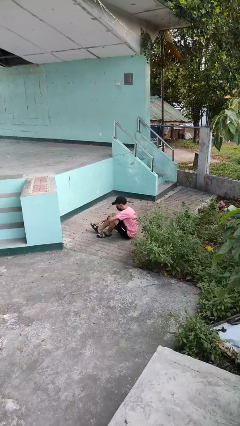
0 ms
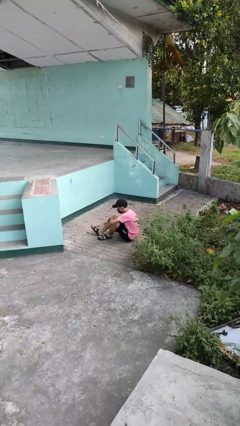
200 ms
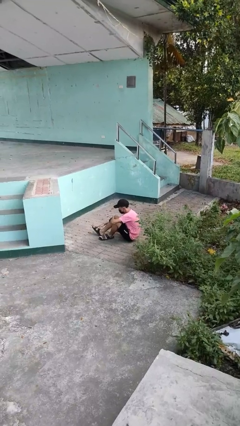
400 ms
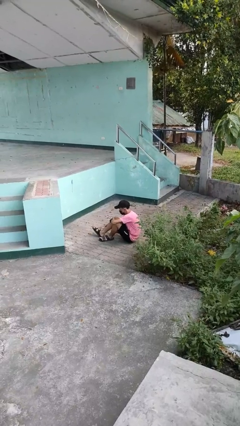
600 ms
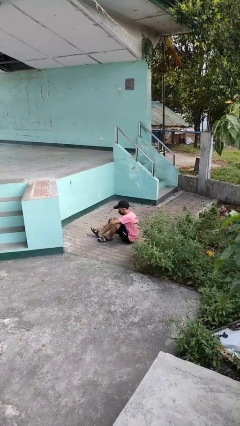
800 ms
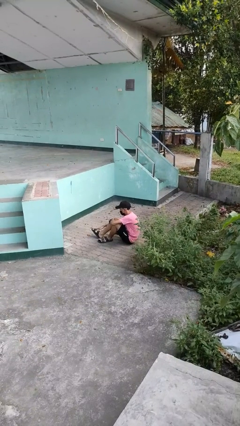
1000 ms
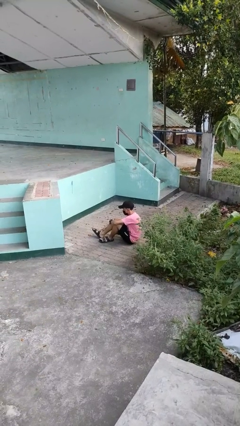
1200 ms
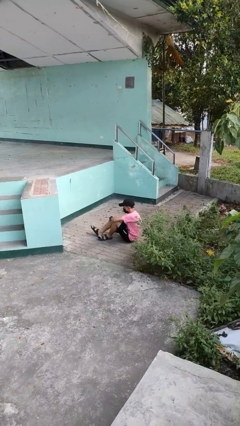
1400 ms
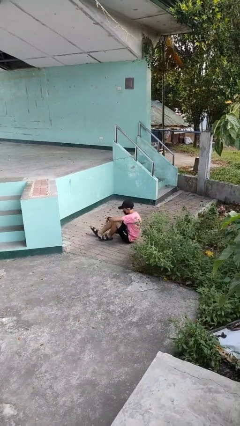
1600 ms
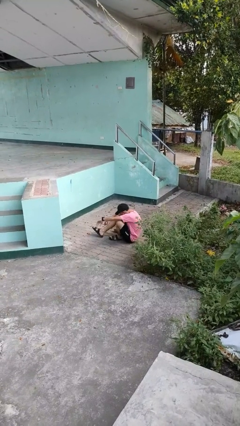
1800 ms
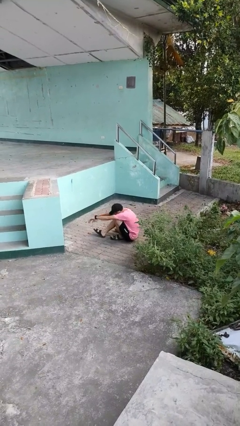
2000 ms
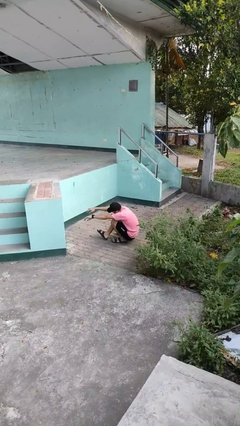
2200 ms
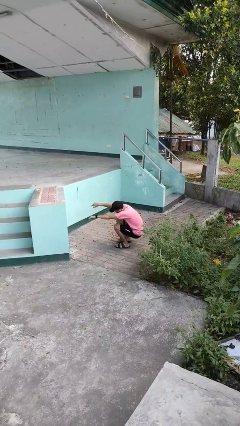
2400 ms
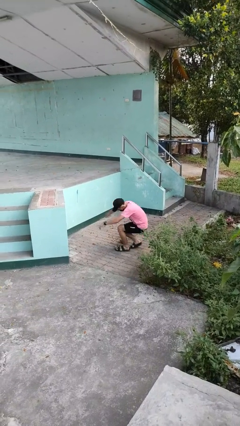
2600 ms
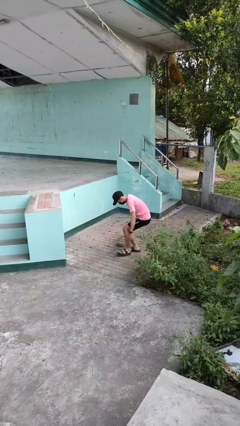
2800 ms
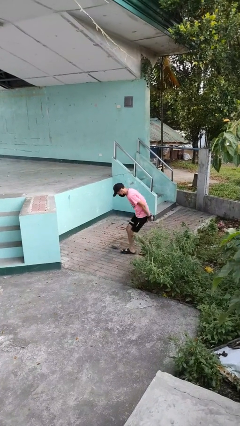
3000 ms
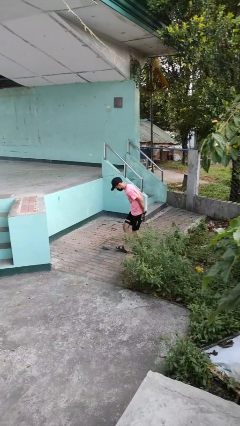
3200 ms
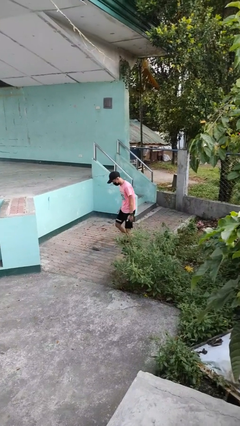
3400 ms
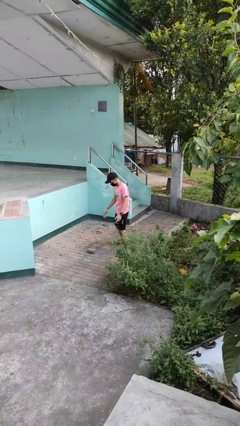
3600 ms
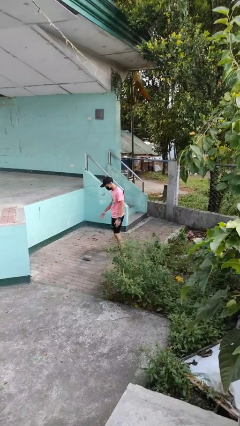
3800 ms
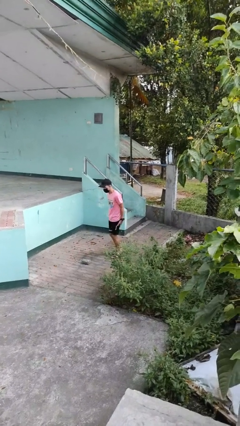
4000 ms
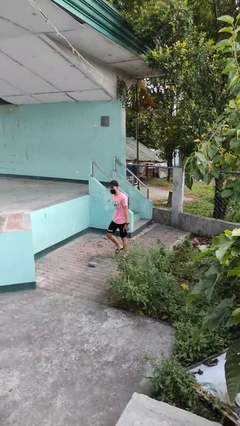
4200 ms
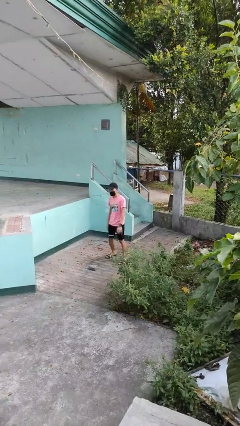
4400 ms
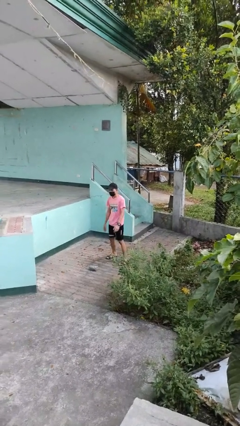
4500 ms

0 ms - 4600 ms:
person stands up from floor

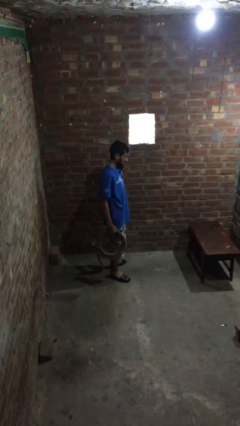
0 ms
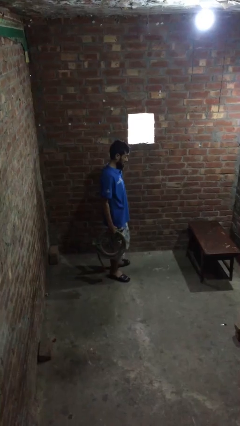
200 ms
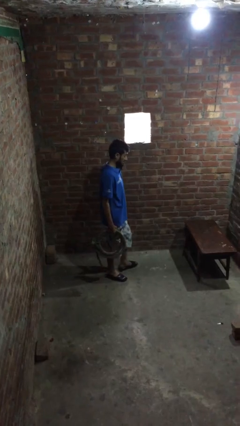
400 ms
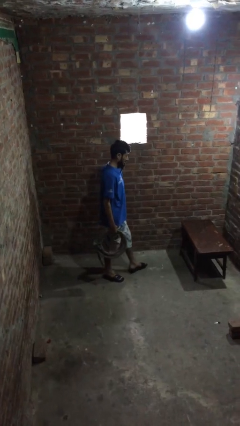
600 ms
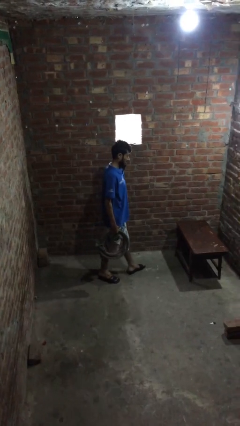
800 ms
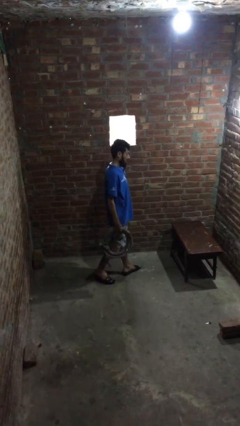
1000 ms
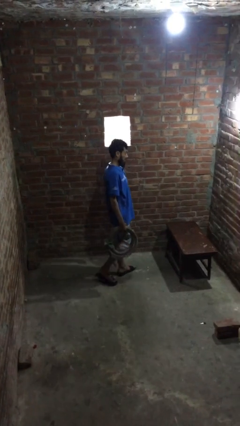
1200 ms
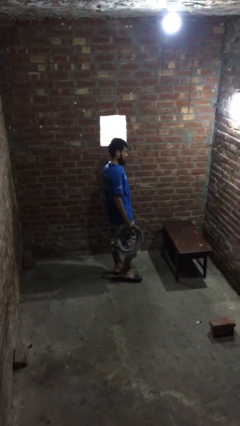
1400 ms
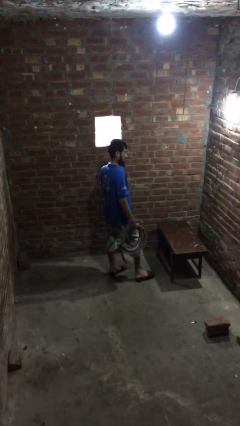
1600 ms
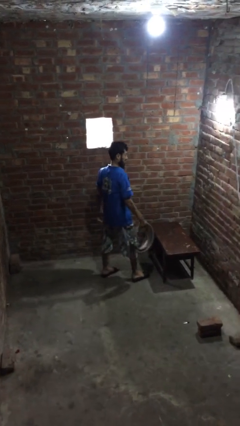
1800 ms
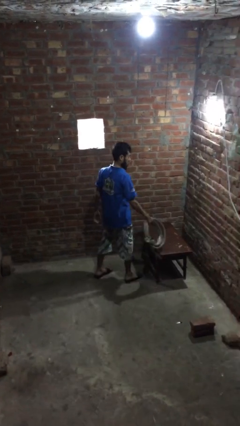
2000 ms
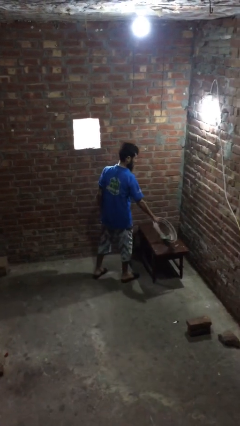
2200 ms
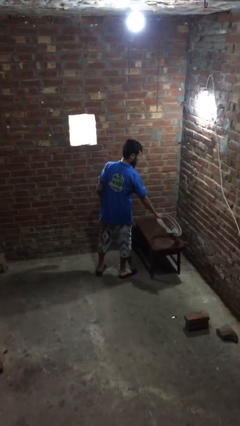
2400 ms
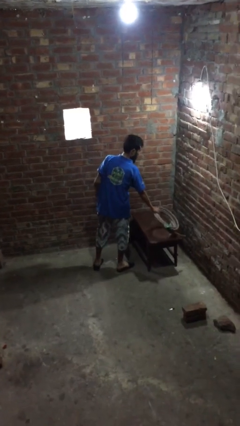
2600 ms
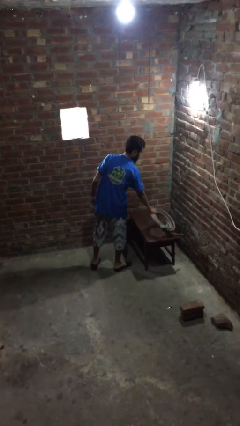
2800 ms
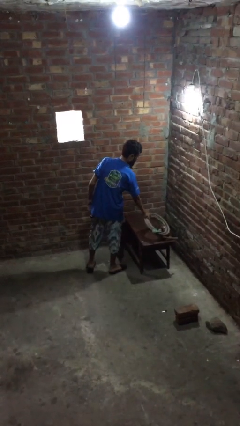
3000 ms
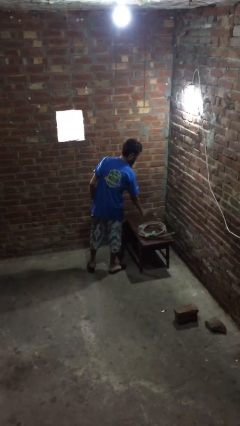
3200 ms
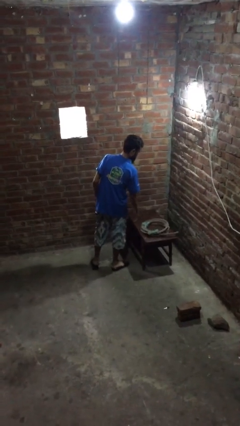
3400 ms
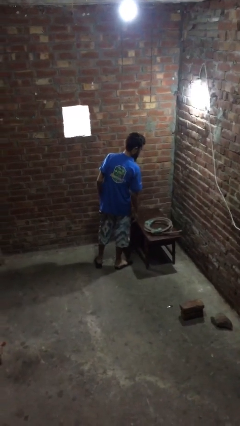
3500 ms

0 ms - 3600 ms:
person puts down object on table

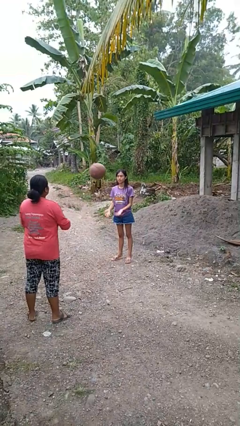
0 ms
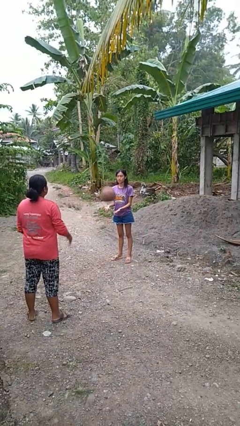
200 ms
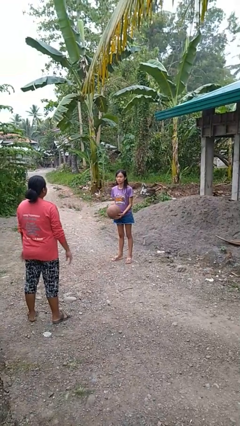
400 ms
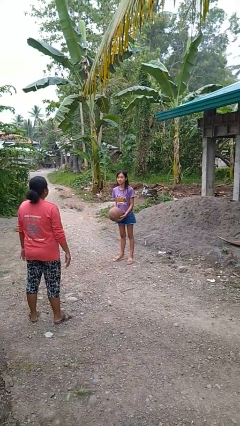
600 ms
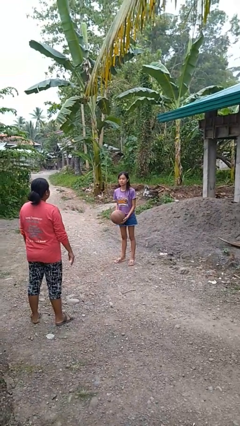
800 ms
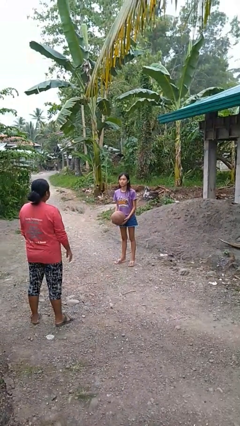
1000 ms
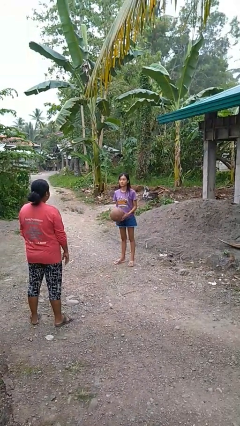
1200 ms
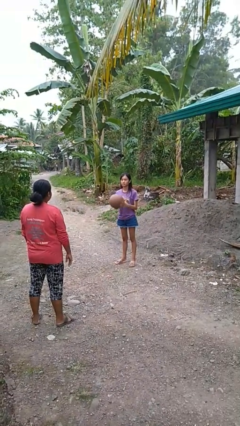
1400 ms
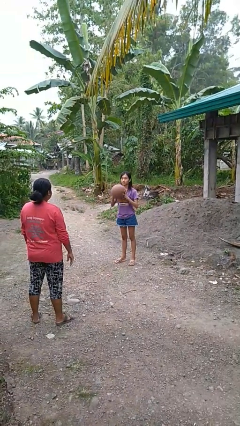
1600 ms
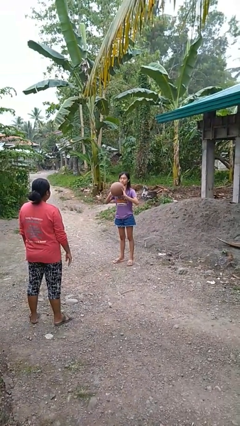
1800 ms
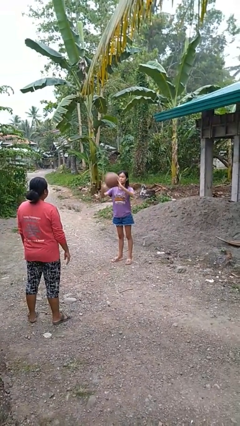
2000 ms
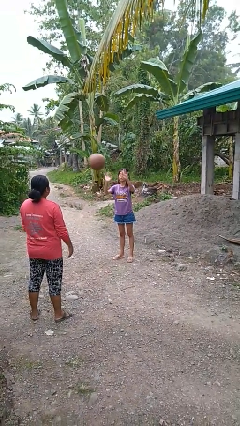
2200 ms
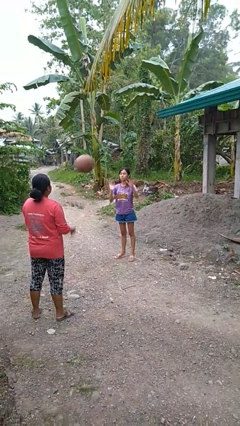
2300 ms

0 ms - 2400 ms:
person catches object from person

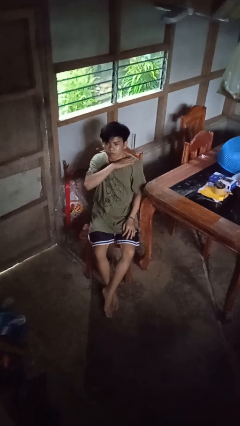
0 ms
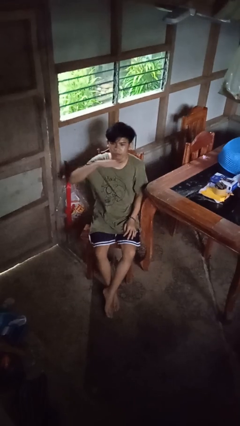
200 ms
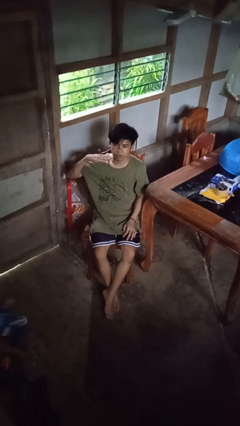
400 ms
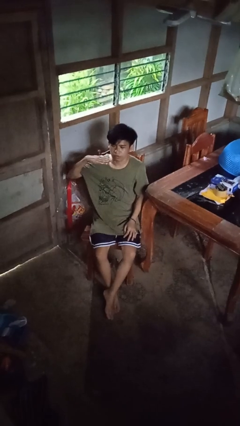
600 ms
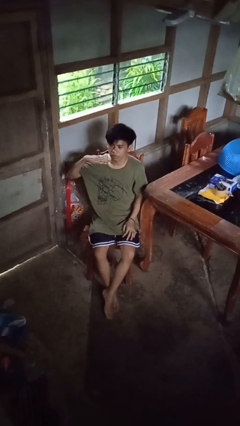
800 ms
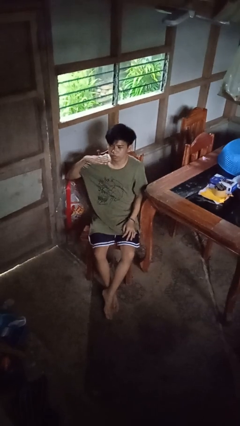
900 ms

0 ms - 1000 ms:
person gestures cut

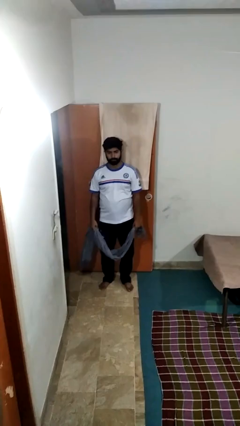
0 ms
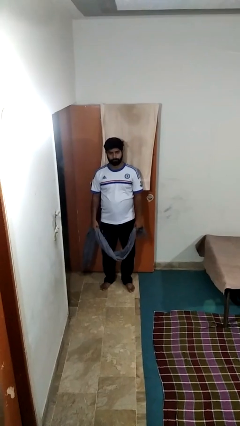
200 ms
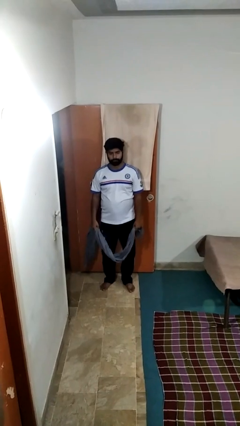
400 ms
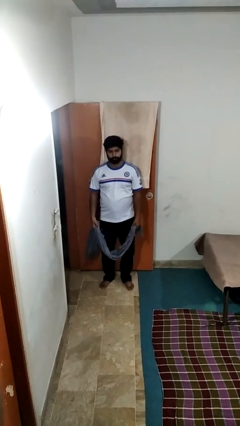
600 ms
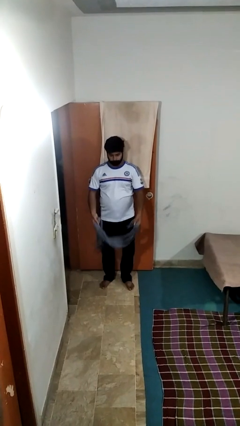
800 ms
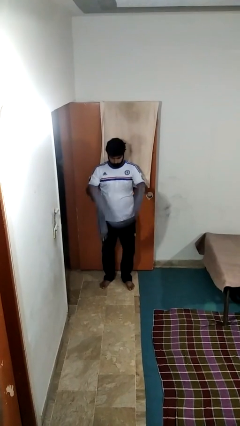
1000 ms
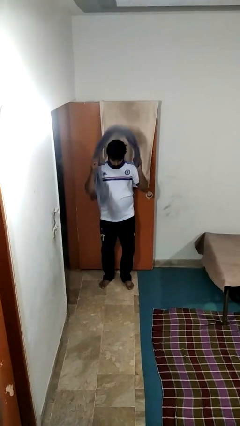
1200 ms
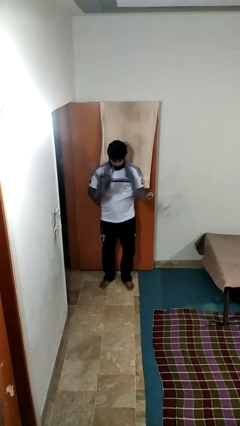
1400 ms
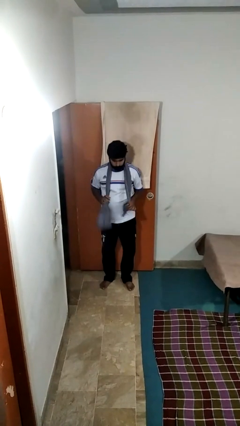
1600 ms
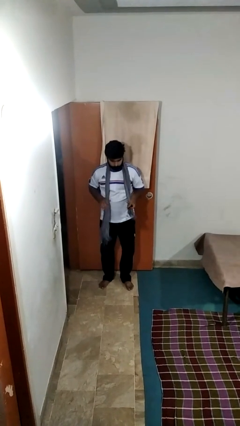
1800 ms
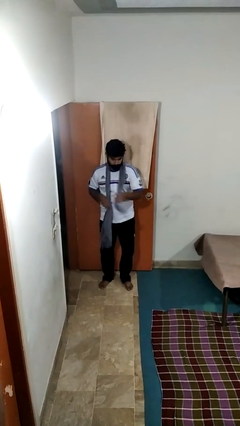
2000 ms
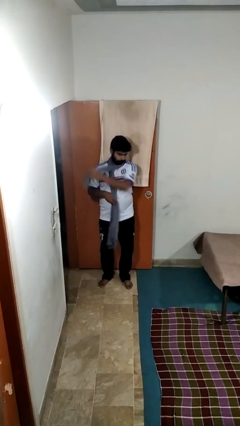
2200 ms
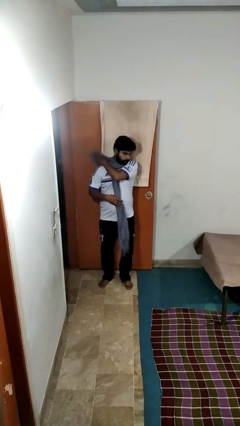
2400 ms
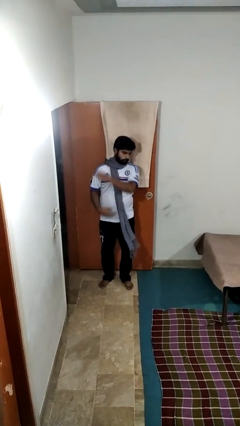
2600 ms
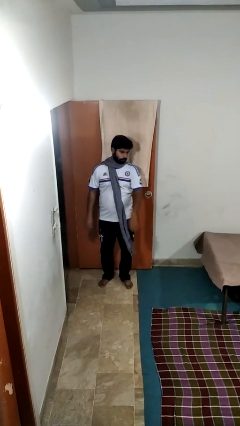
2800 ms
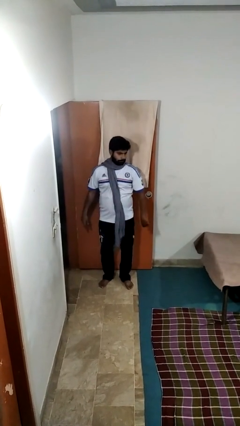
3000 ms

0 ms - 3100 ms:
person puts on scarf

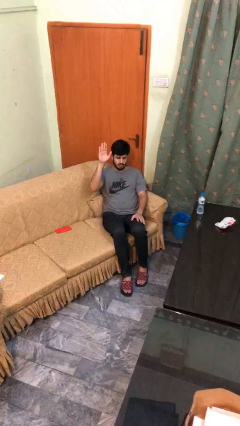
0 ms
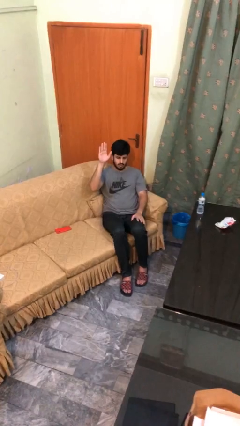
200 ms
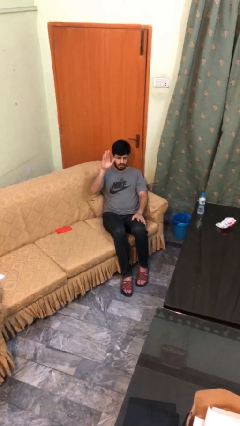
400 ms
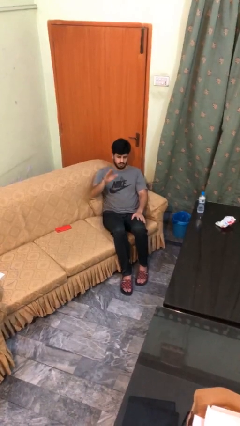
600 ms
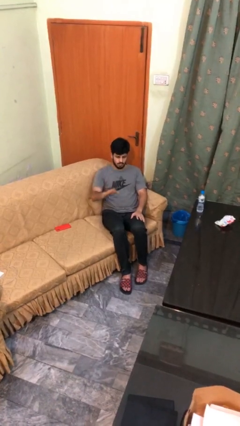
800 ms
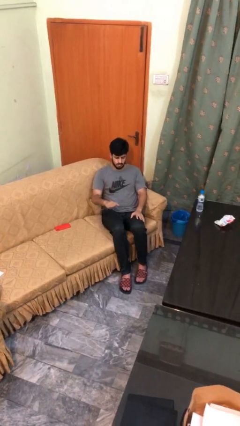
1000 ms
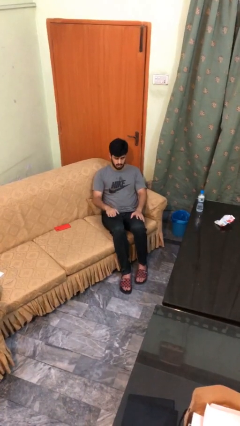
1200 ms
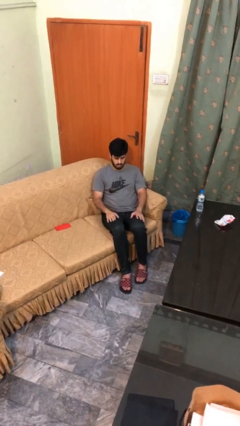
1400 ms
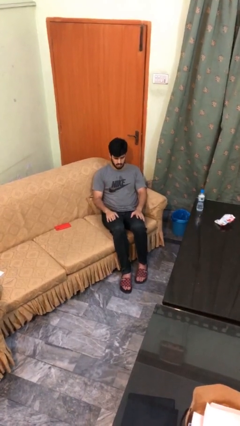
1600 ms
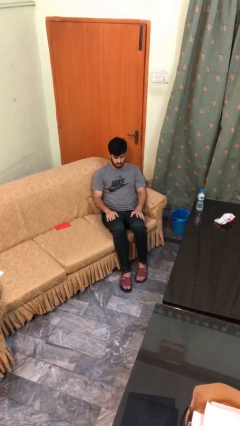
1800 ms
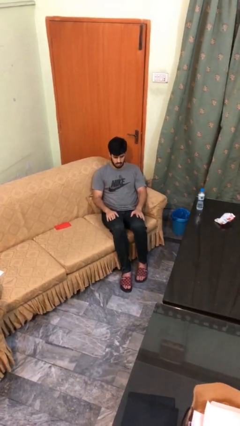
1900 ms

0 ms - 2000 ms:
person gestures lower hand

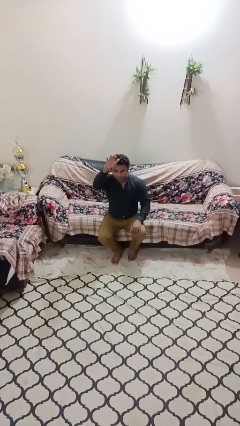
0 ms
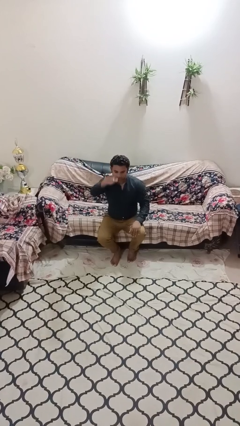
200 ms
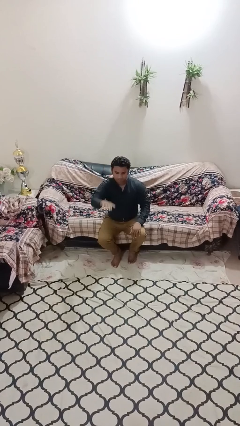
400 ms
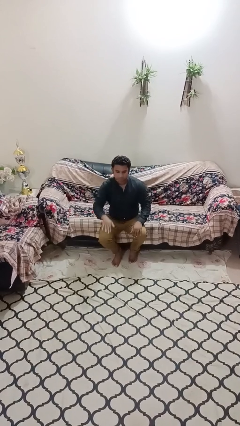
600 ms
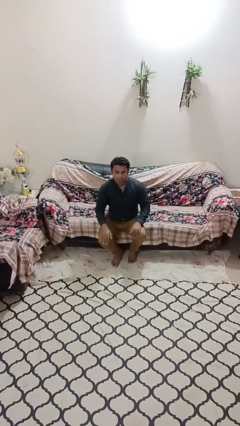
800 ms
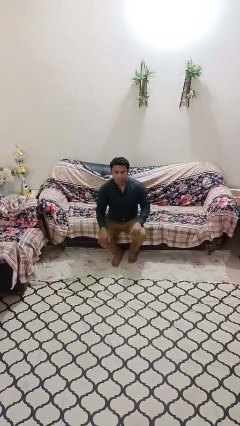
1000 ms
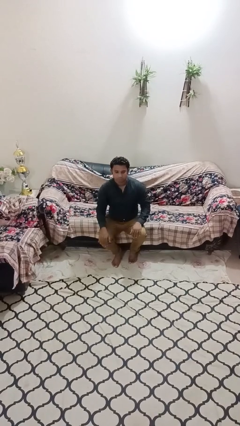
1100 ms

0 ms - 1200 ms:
person gestures swipe down
